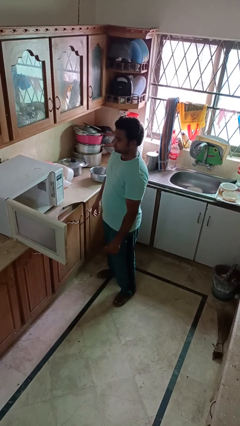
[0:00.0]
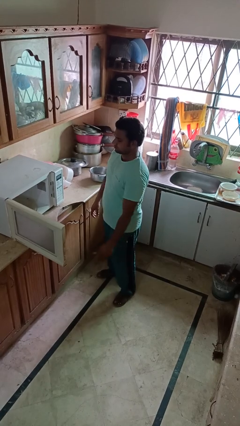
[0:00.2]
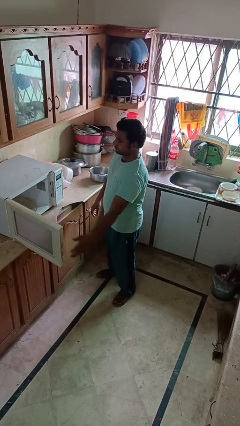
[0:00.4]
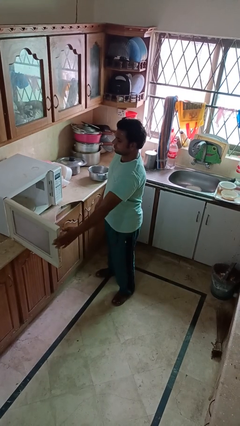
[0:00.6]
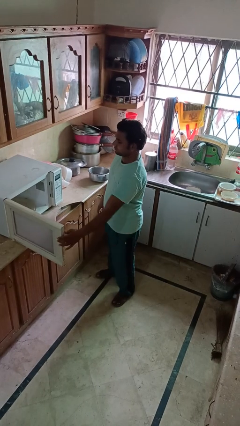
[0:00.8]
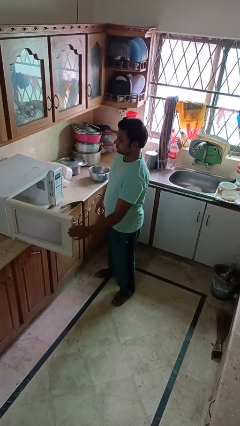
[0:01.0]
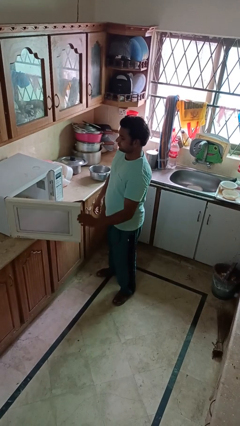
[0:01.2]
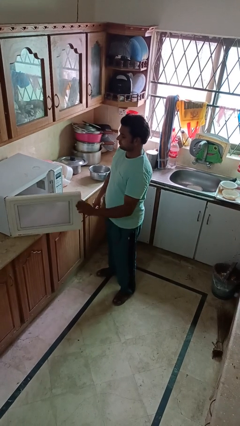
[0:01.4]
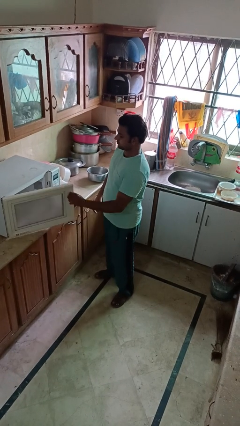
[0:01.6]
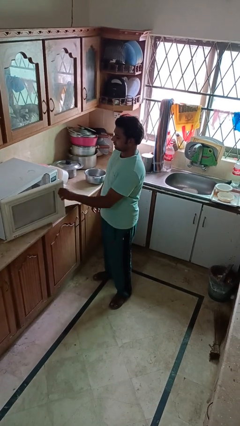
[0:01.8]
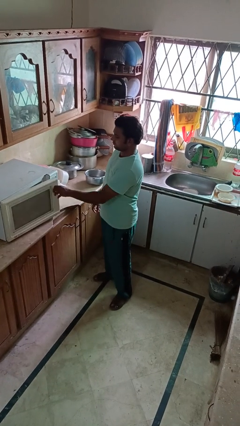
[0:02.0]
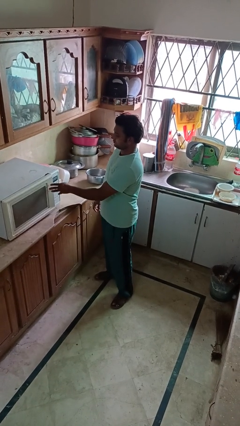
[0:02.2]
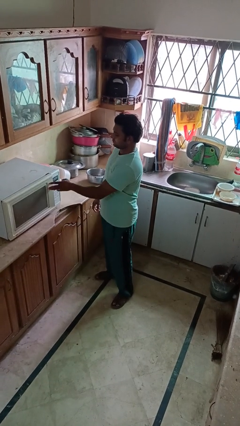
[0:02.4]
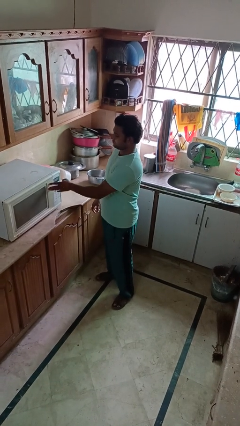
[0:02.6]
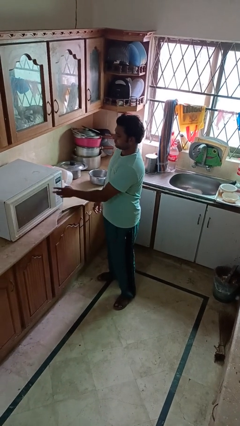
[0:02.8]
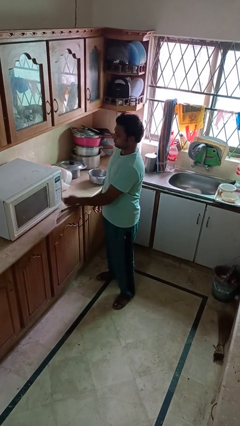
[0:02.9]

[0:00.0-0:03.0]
person closes microwave

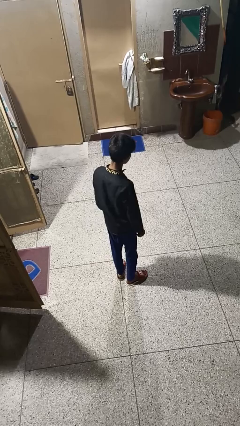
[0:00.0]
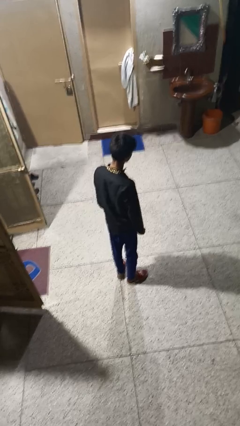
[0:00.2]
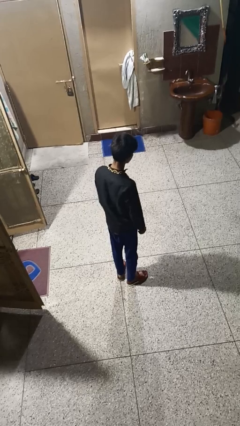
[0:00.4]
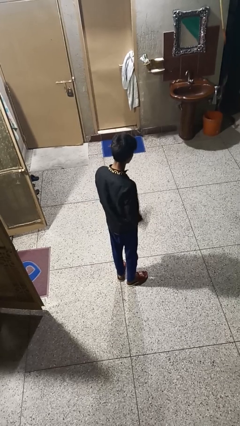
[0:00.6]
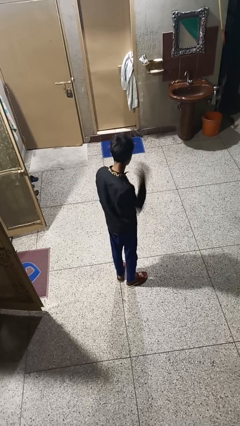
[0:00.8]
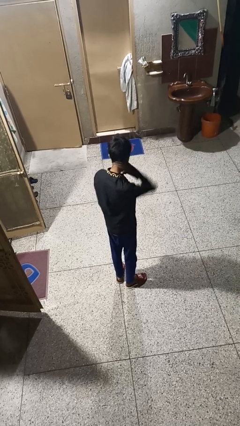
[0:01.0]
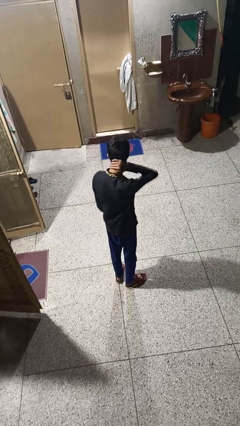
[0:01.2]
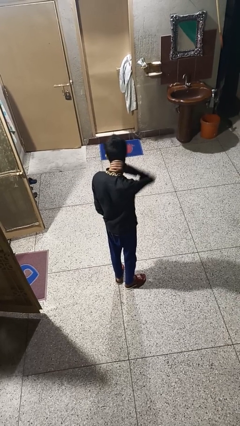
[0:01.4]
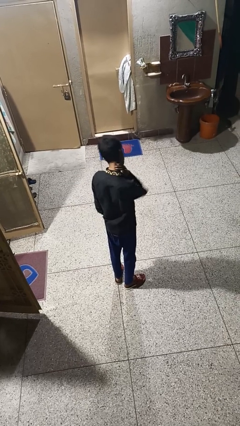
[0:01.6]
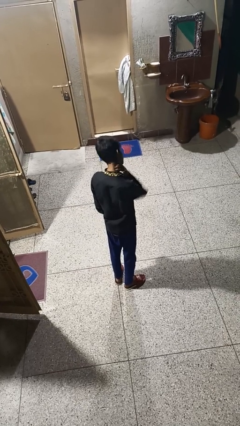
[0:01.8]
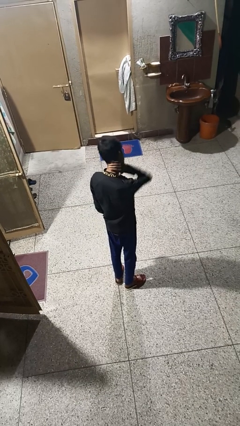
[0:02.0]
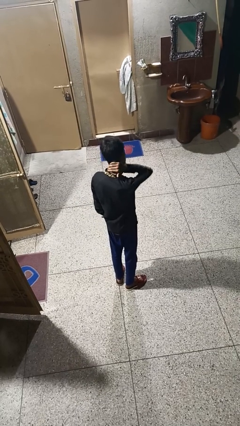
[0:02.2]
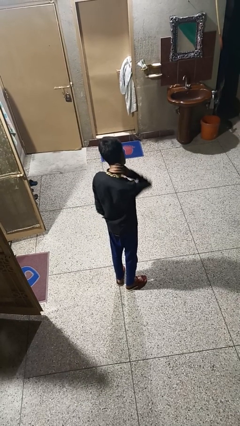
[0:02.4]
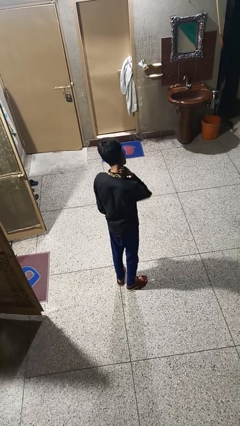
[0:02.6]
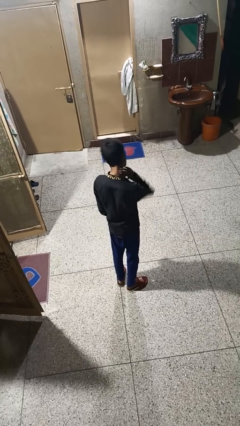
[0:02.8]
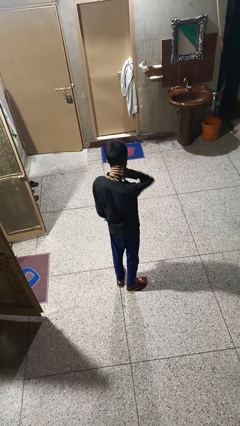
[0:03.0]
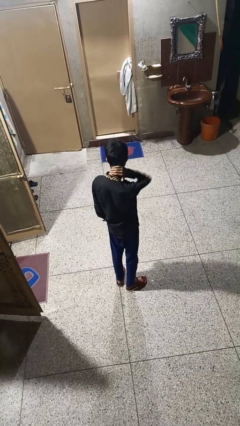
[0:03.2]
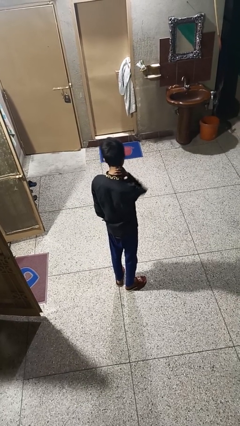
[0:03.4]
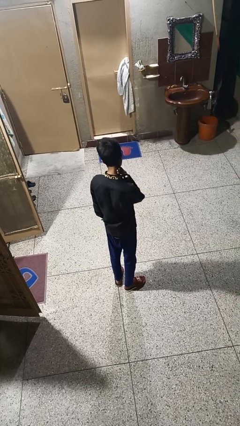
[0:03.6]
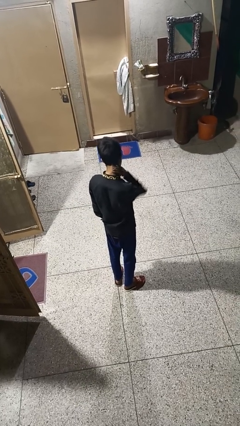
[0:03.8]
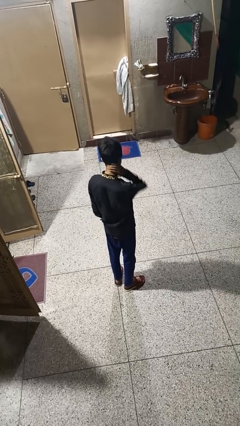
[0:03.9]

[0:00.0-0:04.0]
person rubs neck

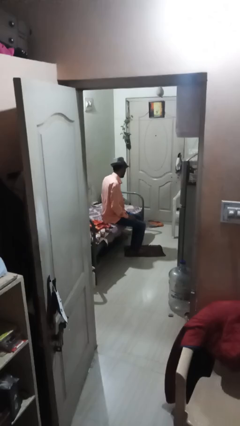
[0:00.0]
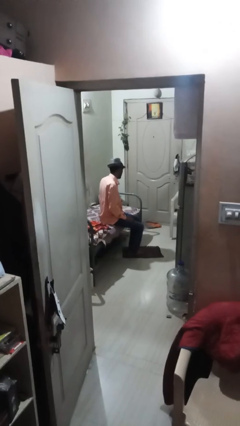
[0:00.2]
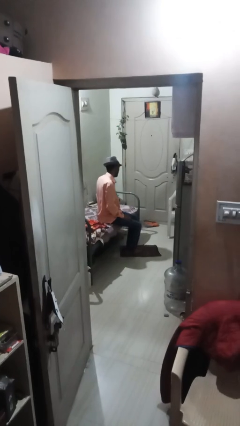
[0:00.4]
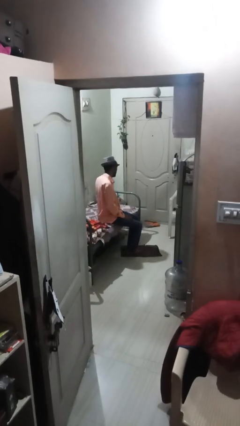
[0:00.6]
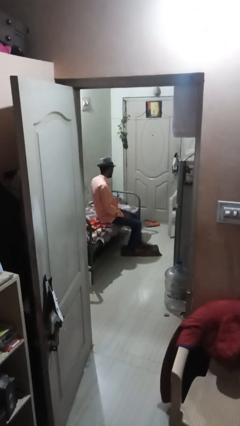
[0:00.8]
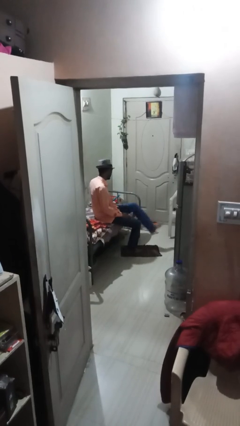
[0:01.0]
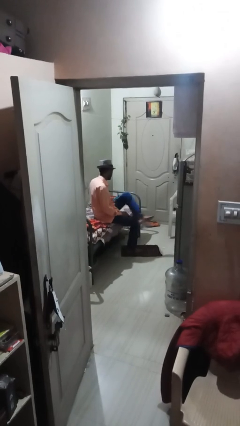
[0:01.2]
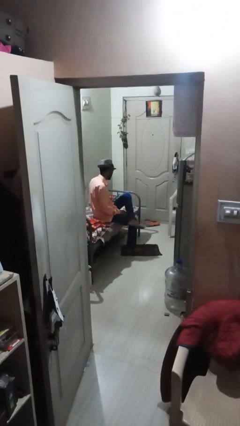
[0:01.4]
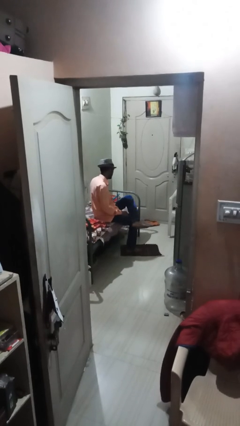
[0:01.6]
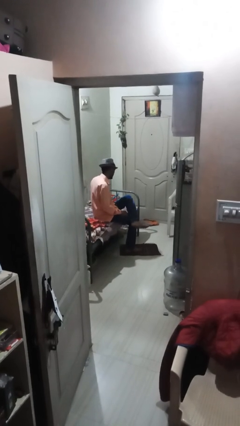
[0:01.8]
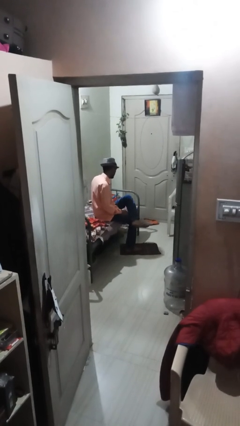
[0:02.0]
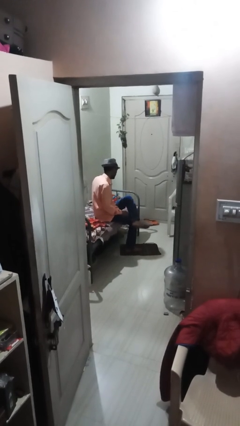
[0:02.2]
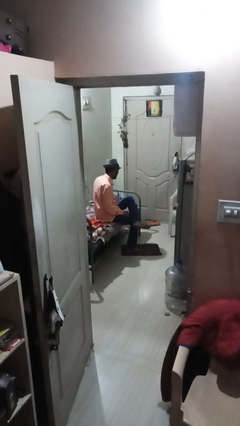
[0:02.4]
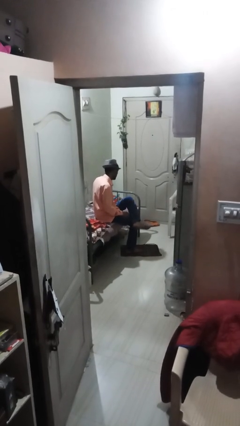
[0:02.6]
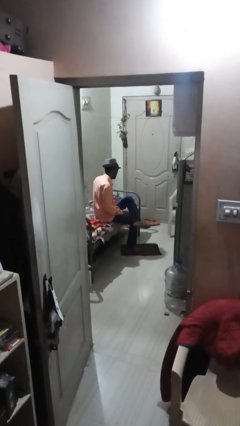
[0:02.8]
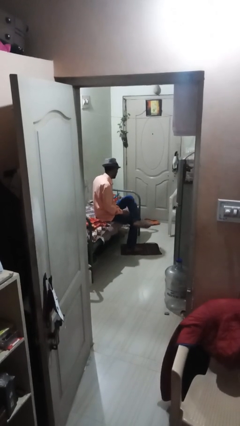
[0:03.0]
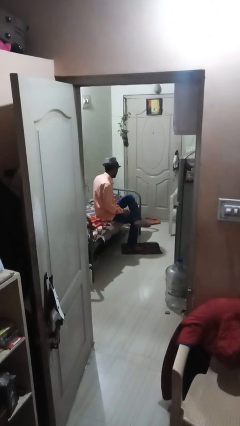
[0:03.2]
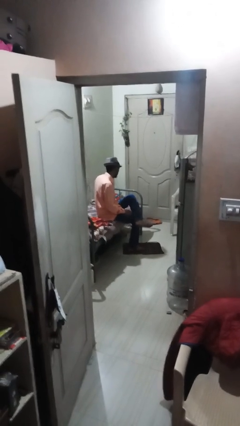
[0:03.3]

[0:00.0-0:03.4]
person crosses legs

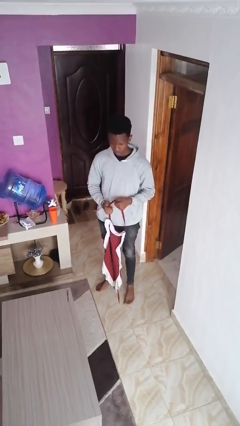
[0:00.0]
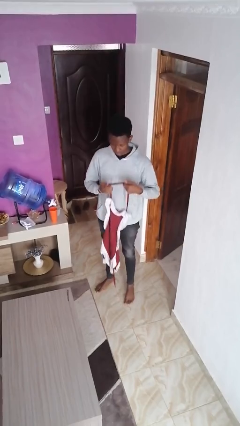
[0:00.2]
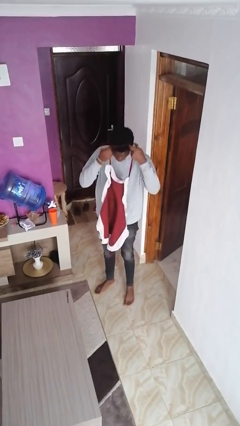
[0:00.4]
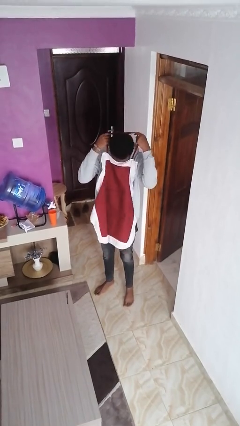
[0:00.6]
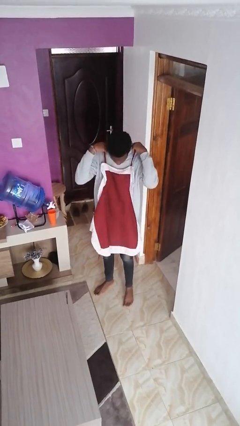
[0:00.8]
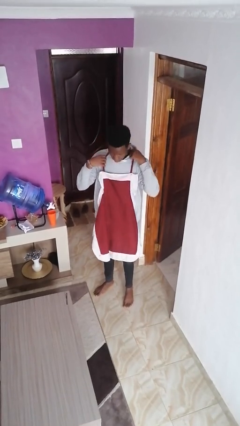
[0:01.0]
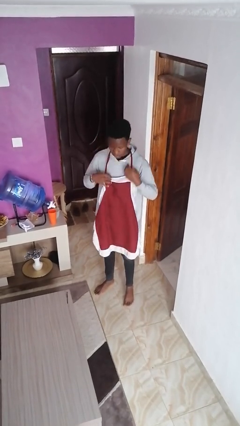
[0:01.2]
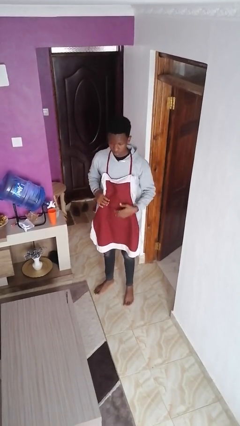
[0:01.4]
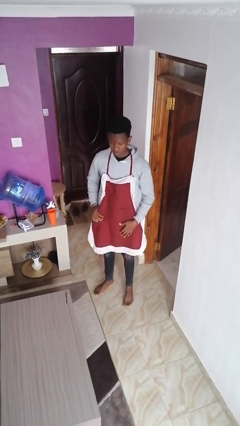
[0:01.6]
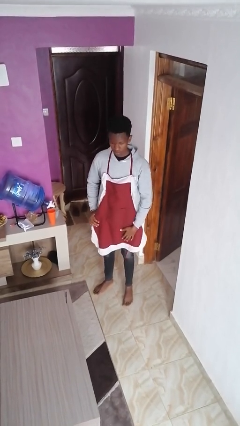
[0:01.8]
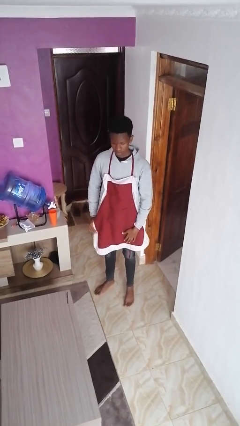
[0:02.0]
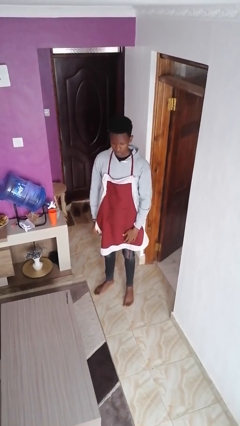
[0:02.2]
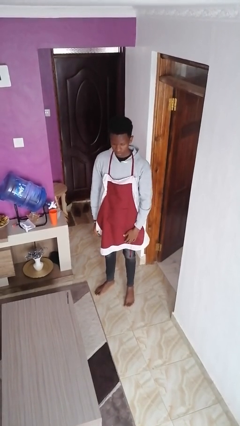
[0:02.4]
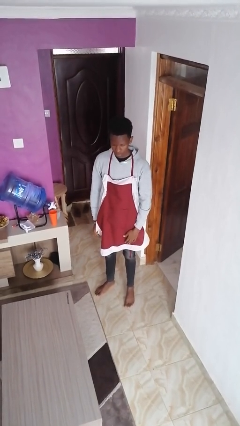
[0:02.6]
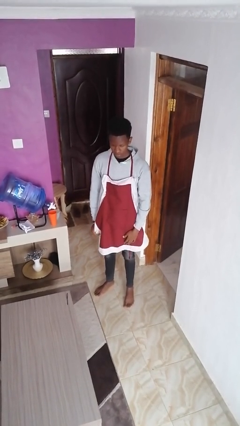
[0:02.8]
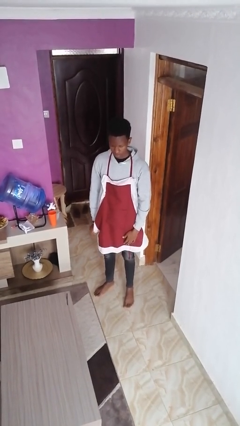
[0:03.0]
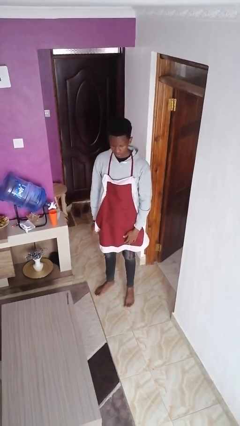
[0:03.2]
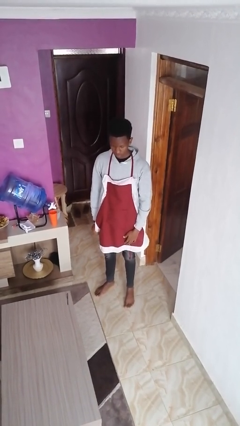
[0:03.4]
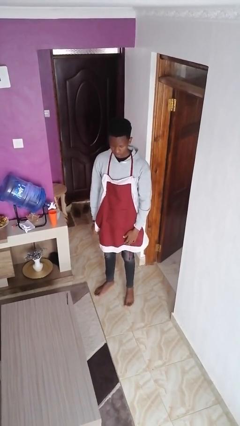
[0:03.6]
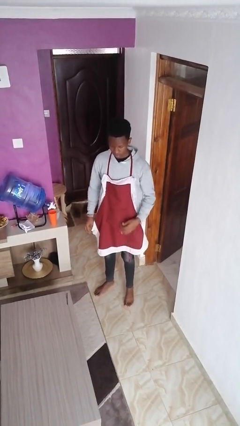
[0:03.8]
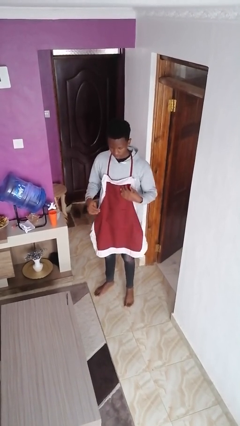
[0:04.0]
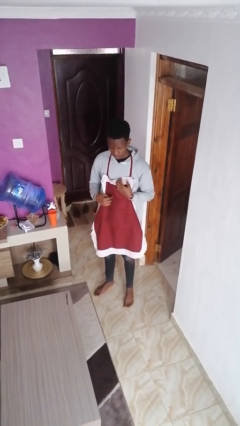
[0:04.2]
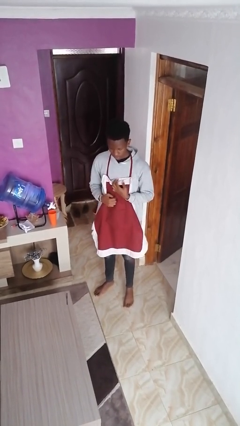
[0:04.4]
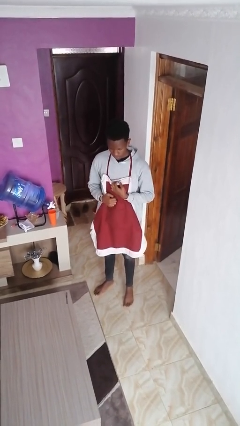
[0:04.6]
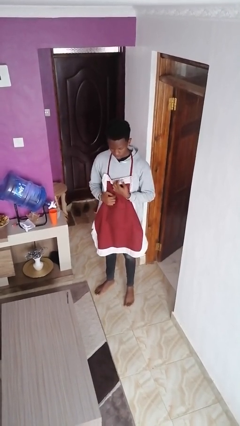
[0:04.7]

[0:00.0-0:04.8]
person puts on apron

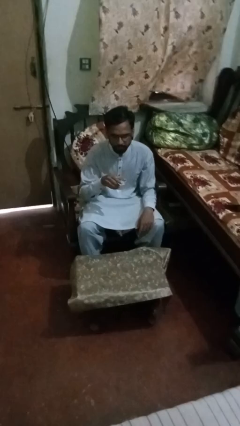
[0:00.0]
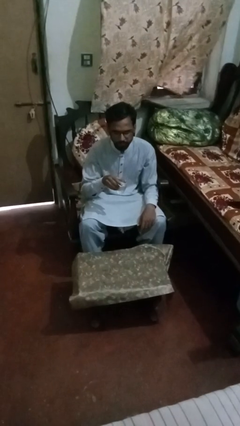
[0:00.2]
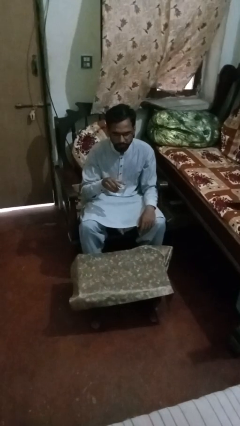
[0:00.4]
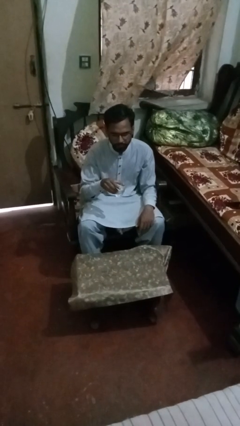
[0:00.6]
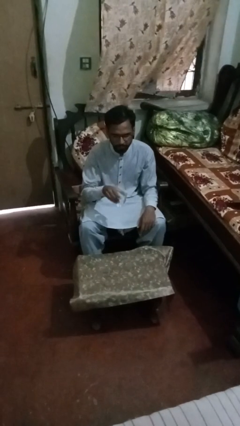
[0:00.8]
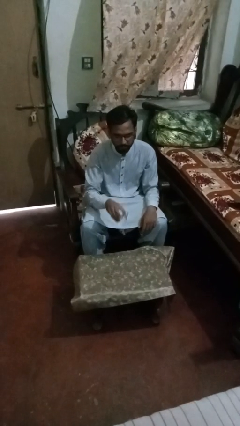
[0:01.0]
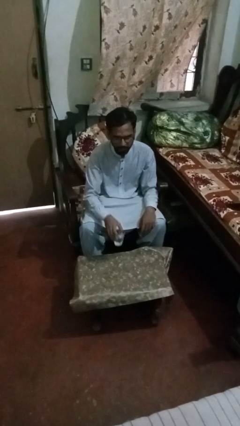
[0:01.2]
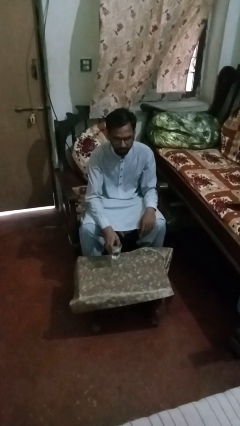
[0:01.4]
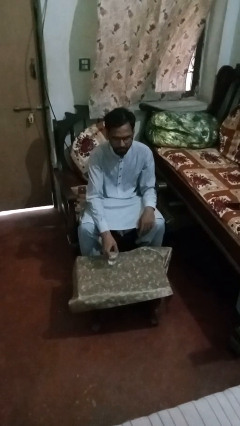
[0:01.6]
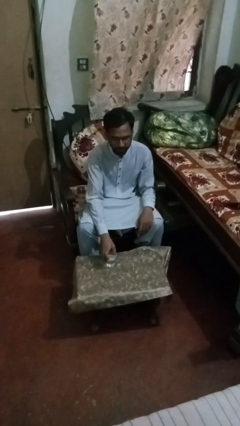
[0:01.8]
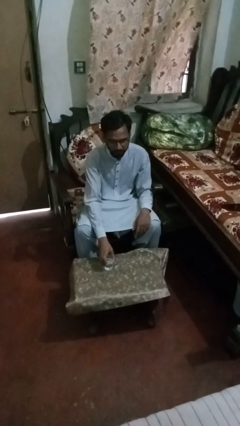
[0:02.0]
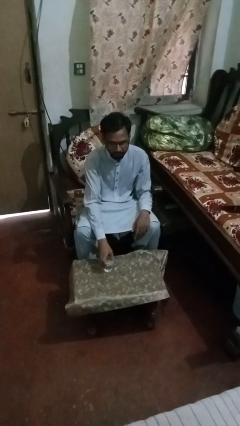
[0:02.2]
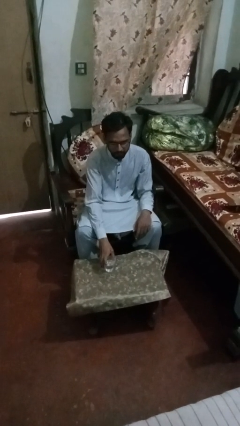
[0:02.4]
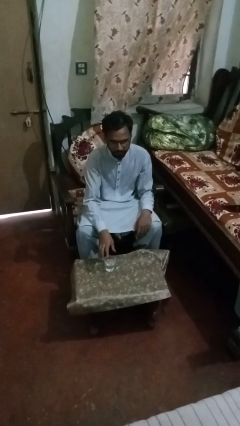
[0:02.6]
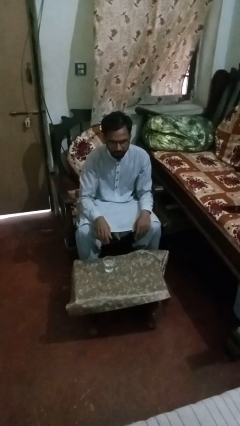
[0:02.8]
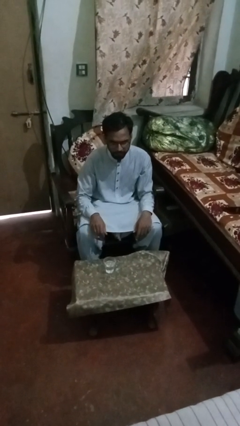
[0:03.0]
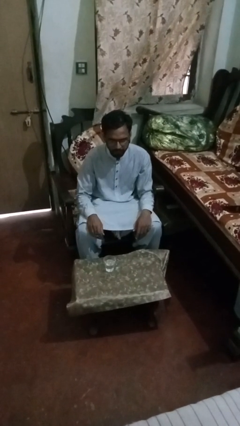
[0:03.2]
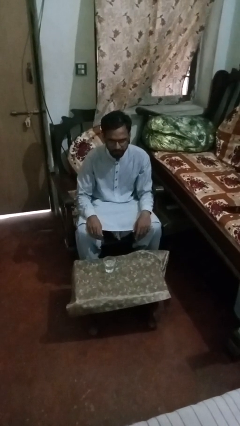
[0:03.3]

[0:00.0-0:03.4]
person puts down object on table
